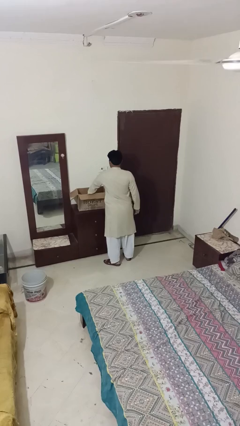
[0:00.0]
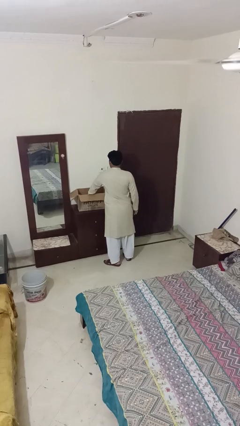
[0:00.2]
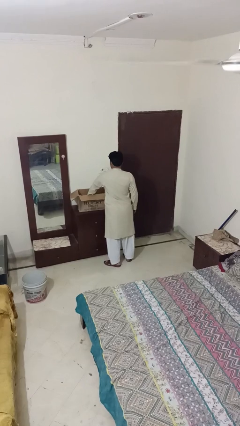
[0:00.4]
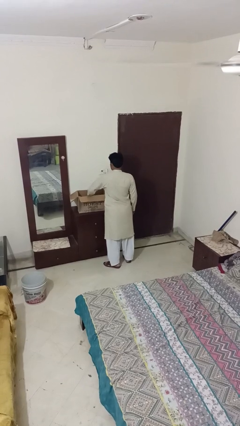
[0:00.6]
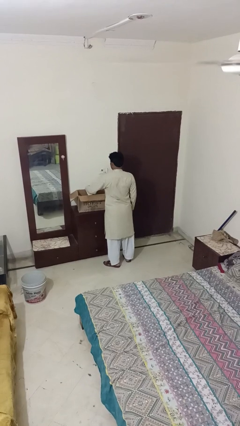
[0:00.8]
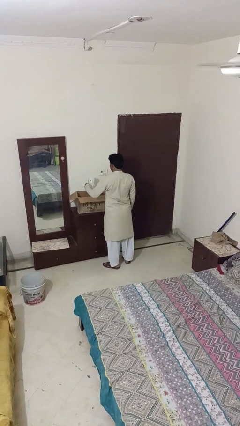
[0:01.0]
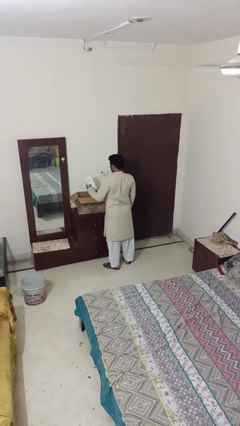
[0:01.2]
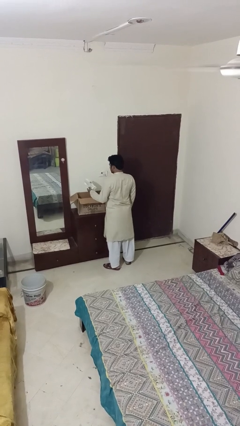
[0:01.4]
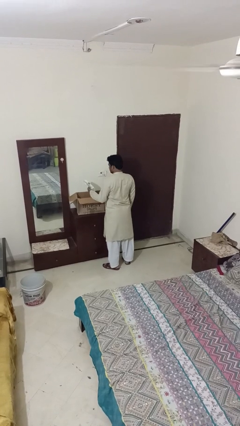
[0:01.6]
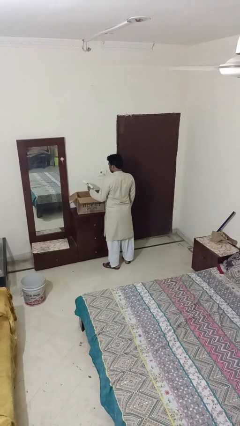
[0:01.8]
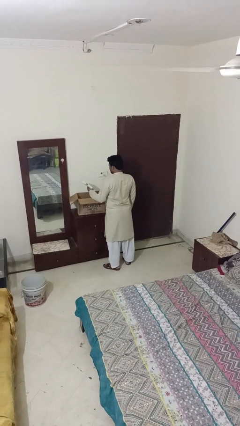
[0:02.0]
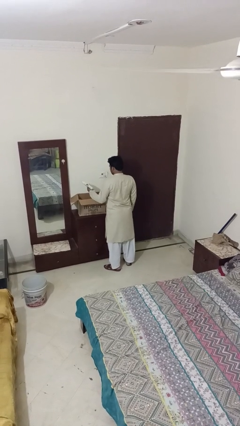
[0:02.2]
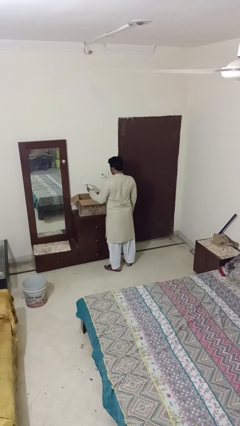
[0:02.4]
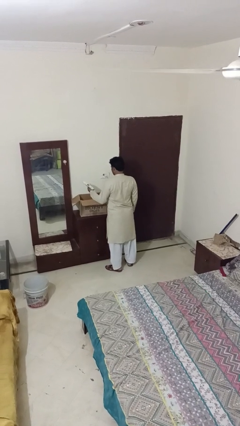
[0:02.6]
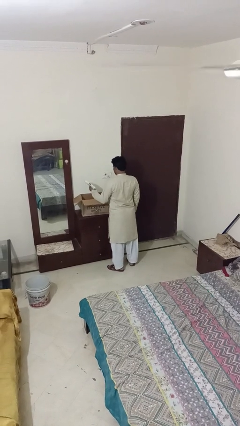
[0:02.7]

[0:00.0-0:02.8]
person takes object from box

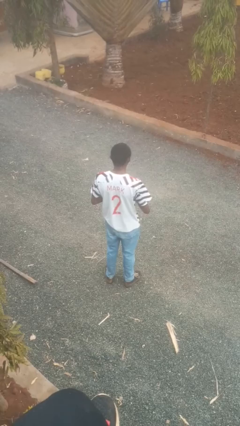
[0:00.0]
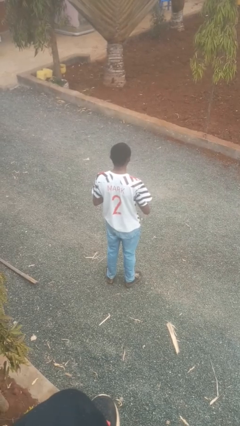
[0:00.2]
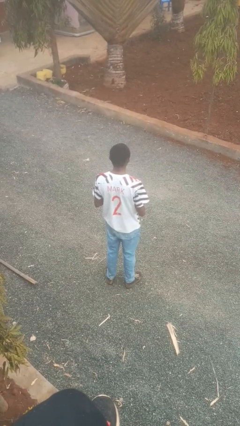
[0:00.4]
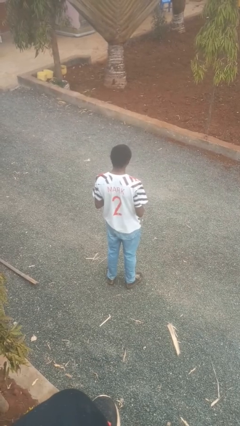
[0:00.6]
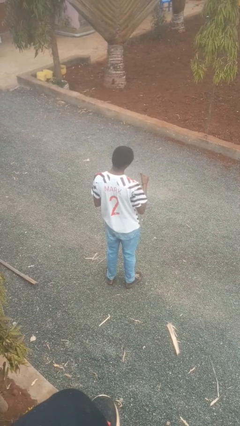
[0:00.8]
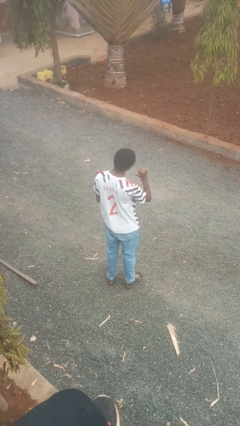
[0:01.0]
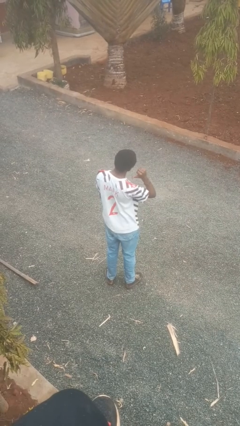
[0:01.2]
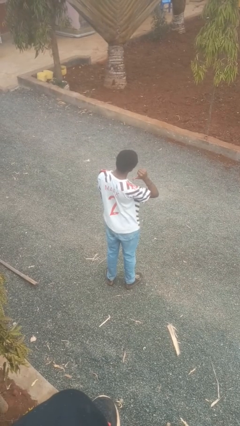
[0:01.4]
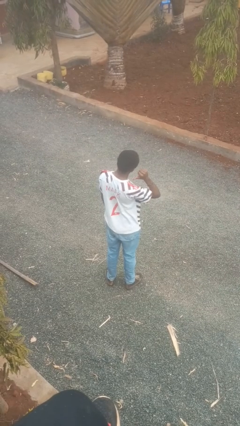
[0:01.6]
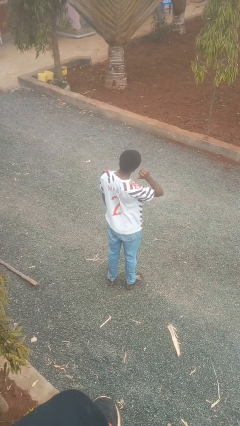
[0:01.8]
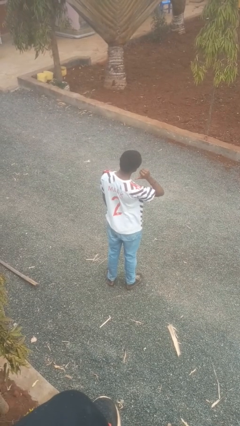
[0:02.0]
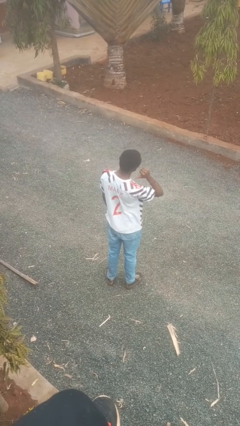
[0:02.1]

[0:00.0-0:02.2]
person gestures behind me

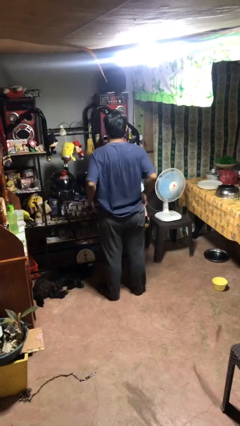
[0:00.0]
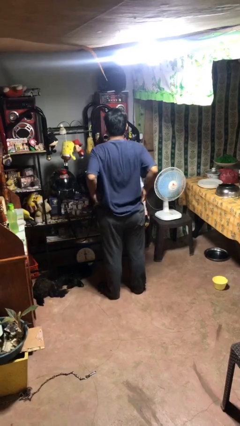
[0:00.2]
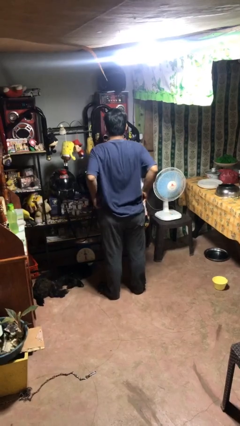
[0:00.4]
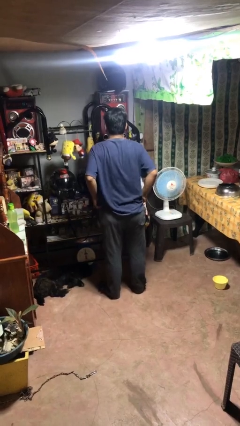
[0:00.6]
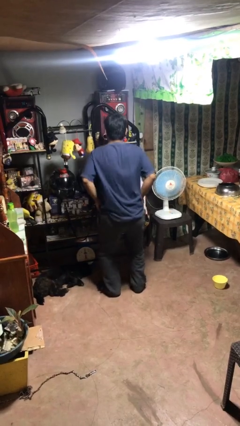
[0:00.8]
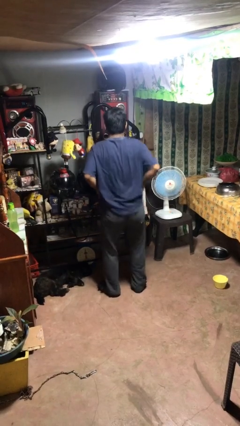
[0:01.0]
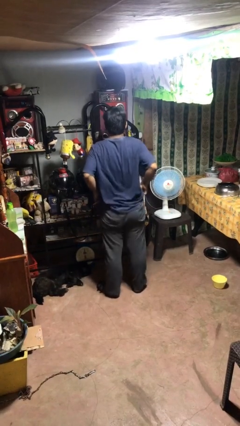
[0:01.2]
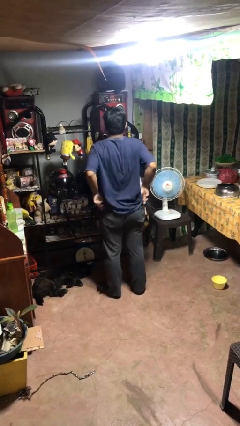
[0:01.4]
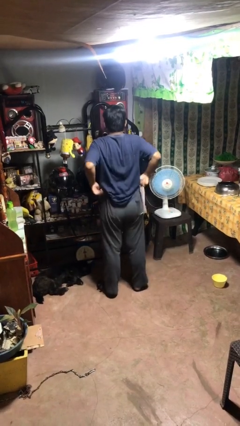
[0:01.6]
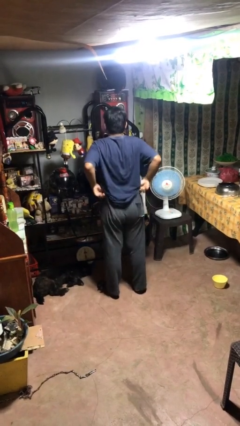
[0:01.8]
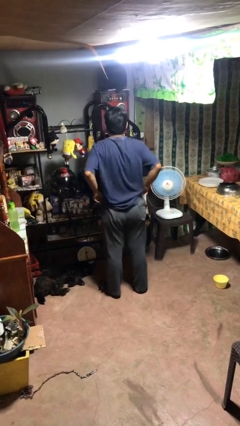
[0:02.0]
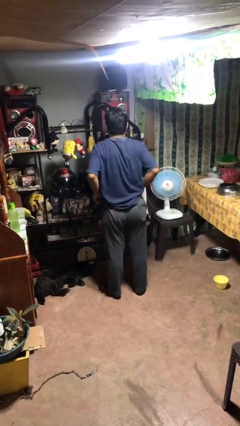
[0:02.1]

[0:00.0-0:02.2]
person hikes up pants

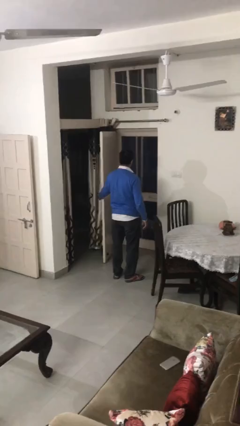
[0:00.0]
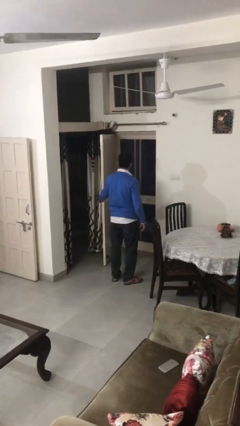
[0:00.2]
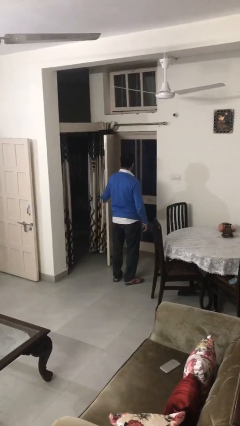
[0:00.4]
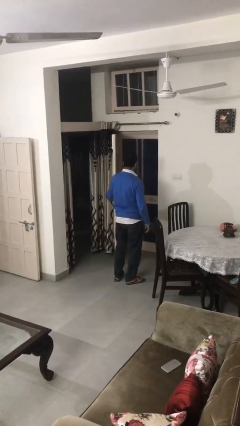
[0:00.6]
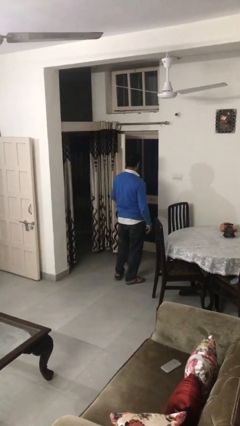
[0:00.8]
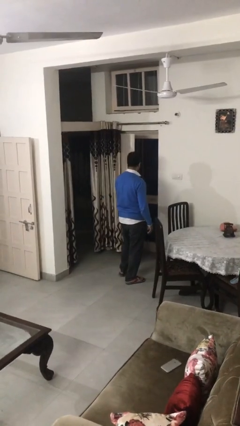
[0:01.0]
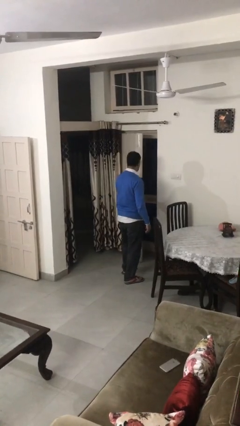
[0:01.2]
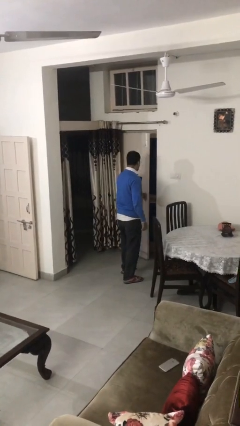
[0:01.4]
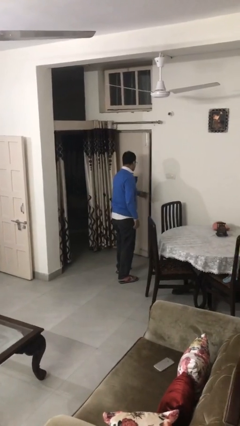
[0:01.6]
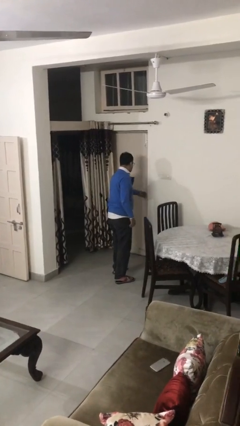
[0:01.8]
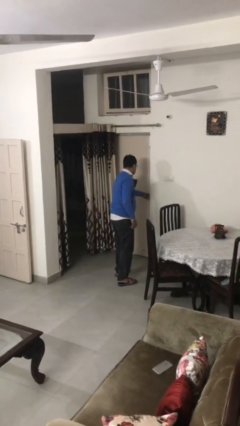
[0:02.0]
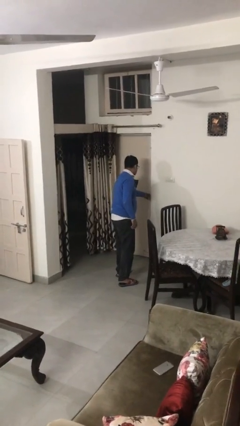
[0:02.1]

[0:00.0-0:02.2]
person closes facility door

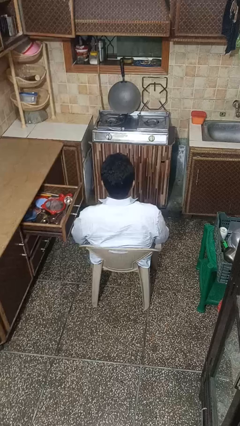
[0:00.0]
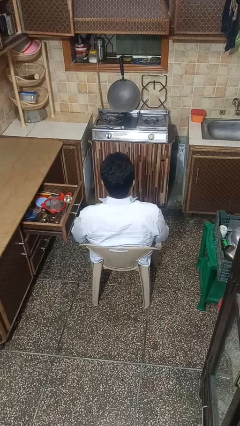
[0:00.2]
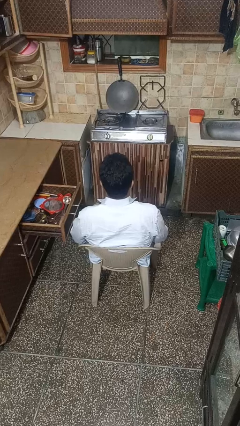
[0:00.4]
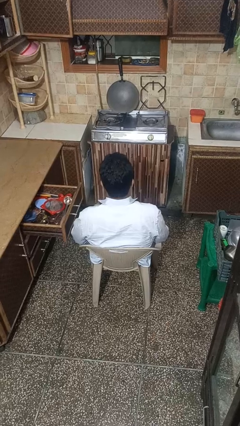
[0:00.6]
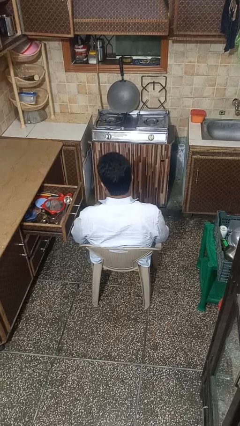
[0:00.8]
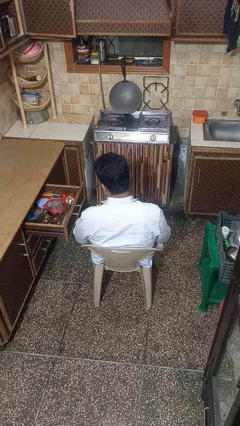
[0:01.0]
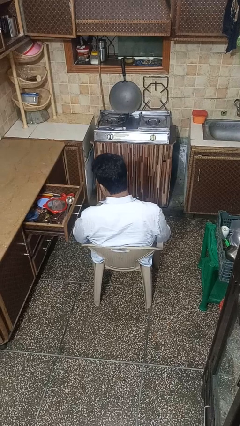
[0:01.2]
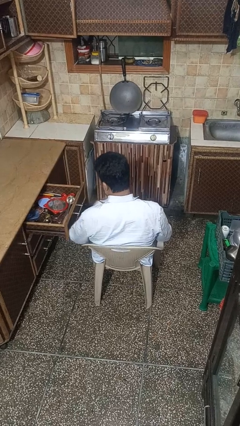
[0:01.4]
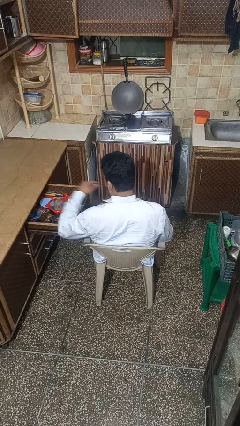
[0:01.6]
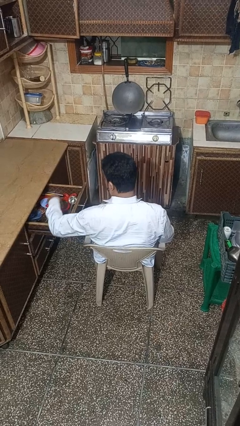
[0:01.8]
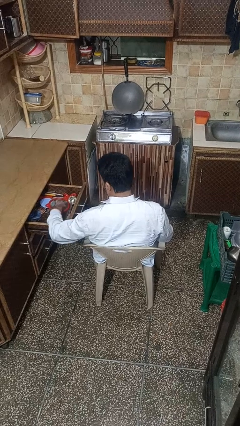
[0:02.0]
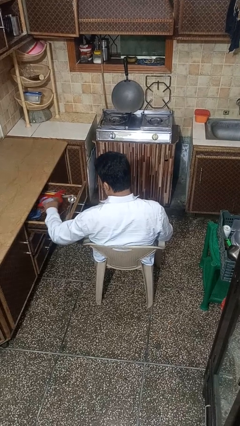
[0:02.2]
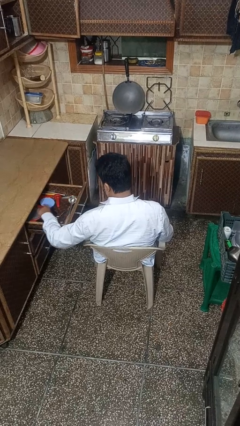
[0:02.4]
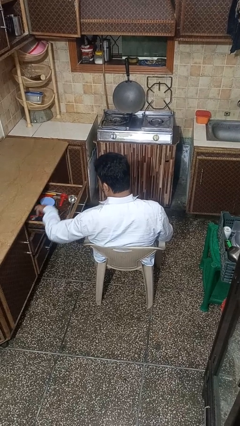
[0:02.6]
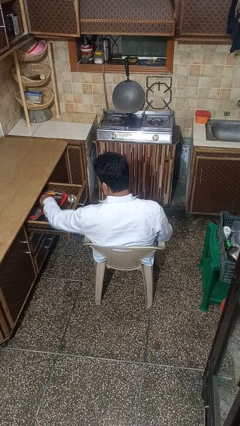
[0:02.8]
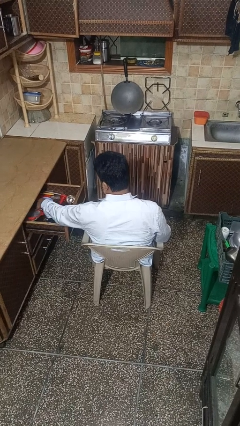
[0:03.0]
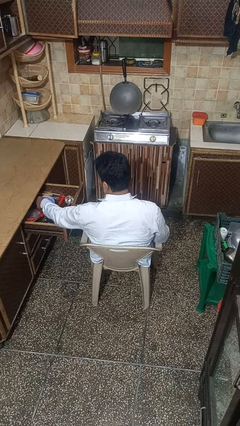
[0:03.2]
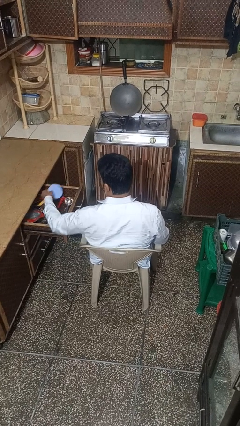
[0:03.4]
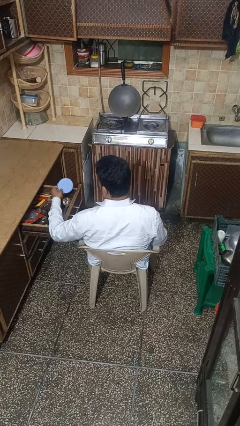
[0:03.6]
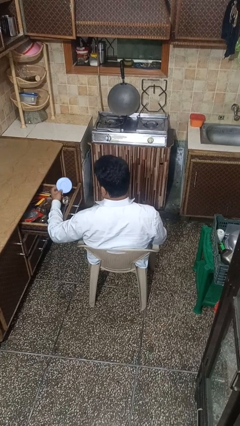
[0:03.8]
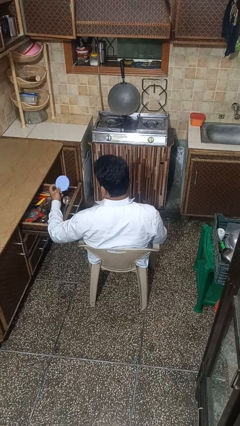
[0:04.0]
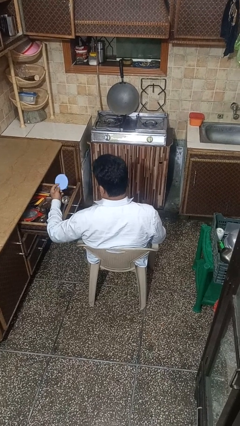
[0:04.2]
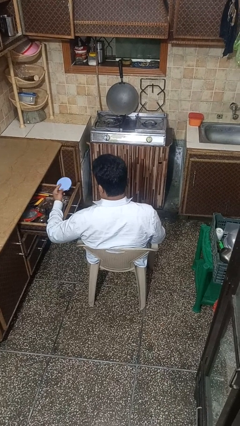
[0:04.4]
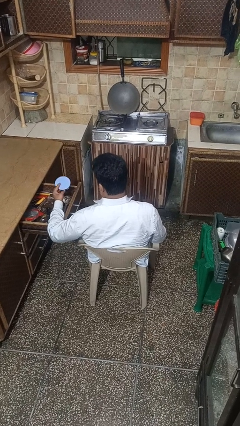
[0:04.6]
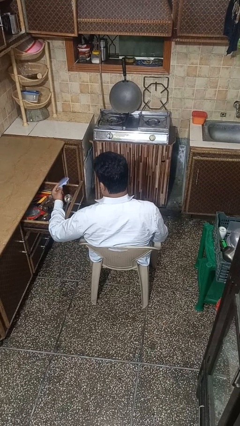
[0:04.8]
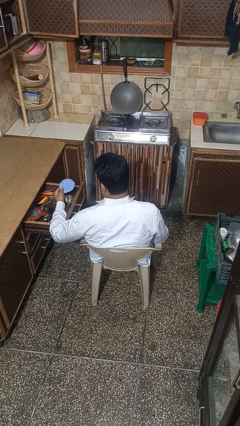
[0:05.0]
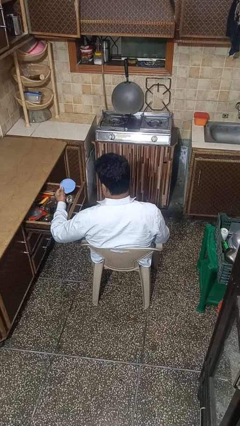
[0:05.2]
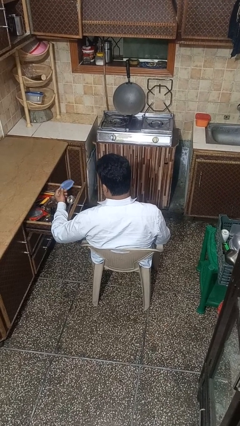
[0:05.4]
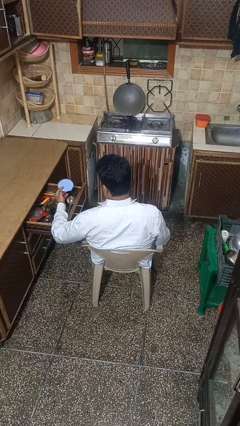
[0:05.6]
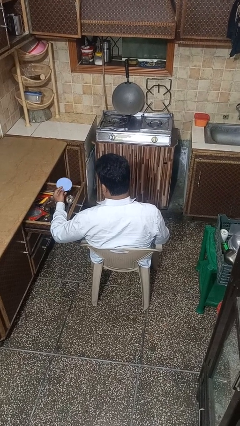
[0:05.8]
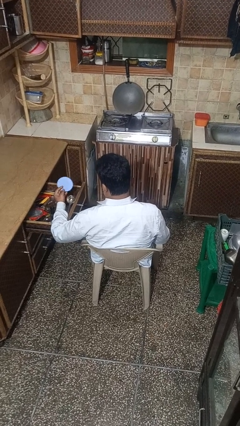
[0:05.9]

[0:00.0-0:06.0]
person takes object from kitchen drawer

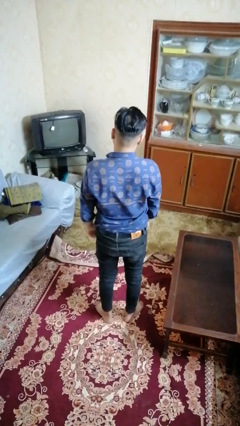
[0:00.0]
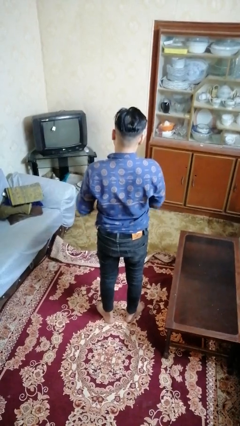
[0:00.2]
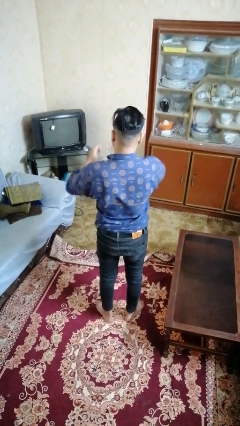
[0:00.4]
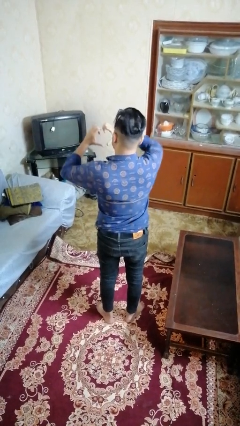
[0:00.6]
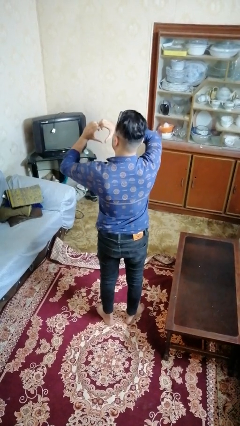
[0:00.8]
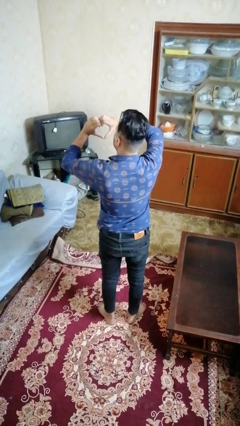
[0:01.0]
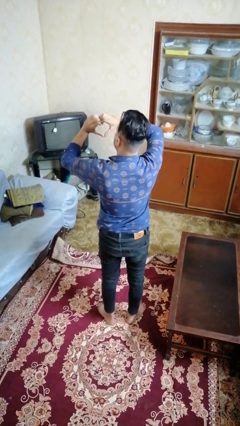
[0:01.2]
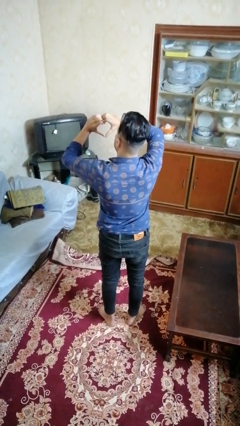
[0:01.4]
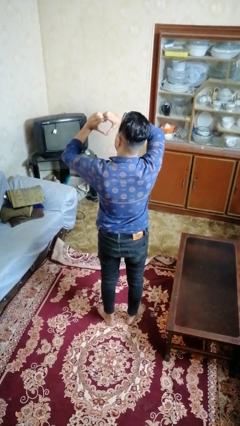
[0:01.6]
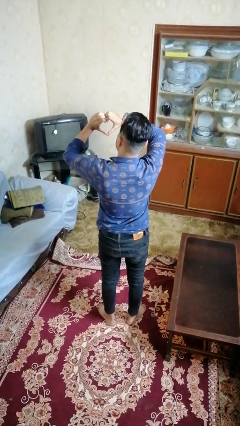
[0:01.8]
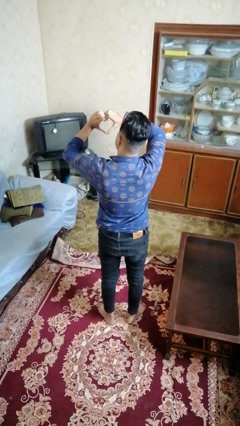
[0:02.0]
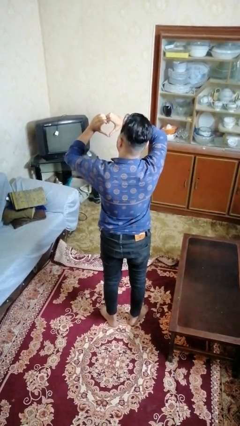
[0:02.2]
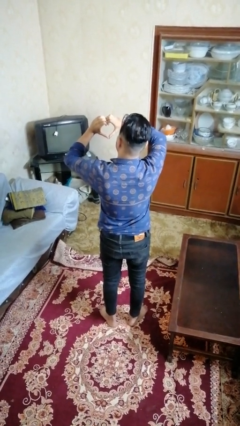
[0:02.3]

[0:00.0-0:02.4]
person gestures heart
